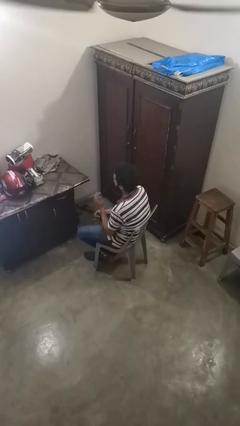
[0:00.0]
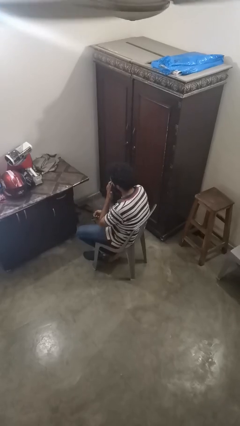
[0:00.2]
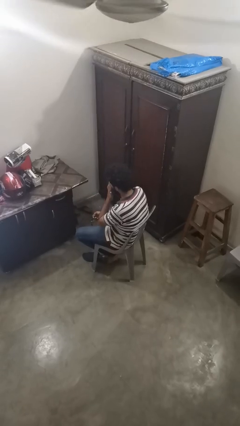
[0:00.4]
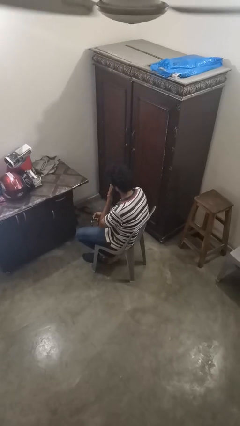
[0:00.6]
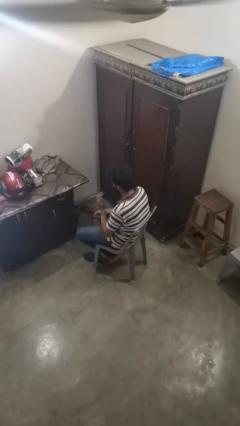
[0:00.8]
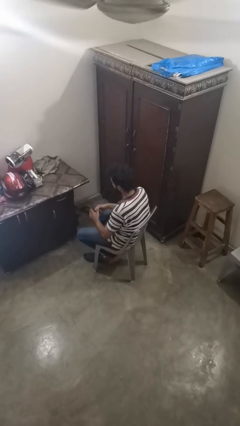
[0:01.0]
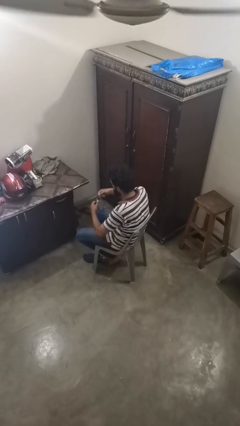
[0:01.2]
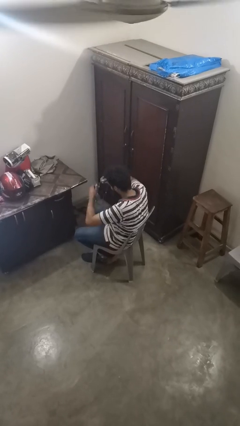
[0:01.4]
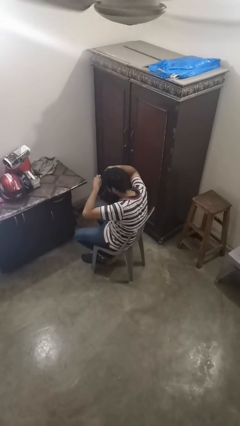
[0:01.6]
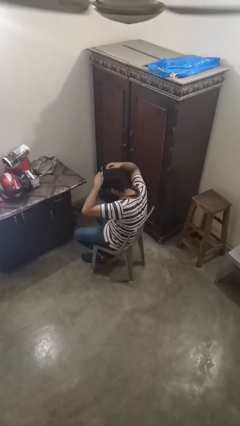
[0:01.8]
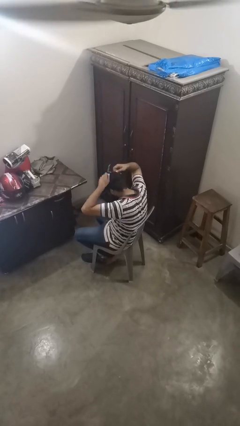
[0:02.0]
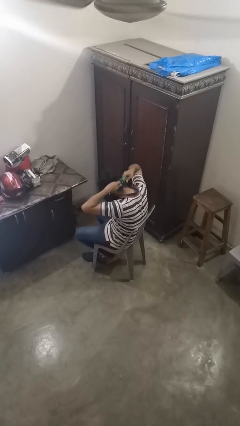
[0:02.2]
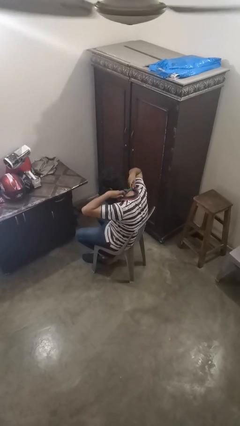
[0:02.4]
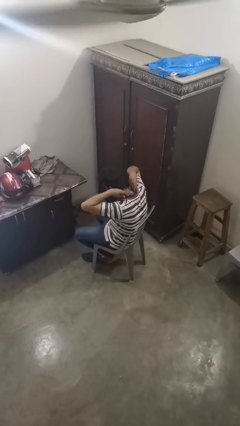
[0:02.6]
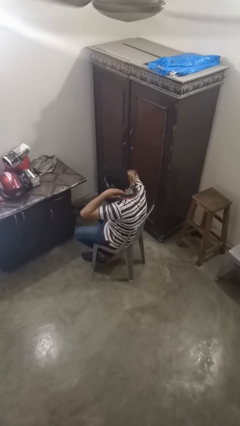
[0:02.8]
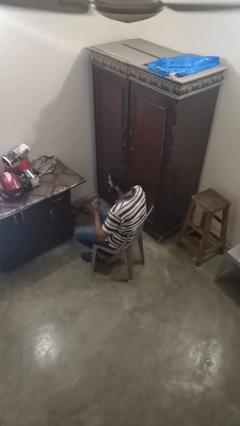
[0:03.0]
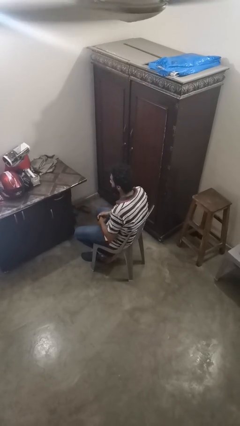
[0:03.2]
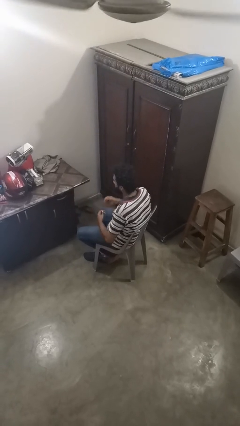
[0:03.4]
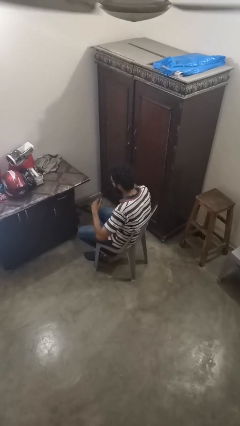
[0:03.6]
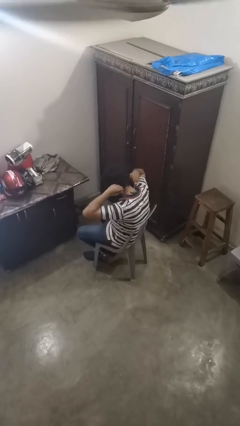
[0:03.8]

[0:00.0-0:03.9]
person puts on necklace

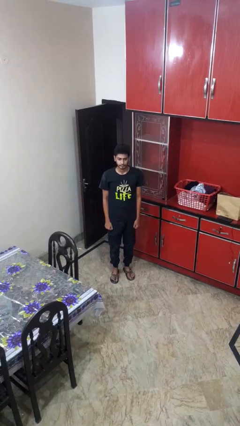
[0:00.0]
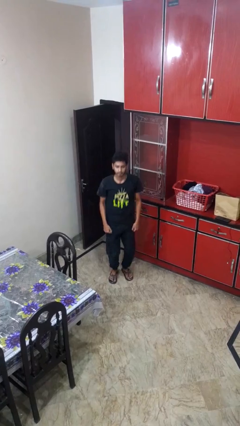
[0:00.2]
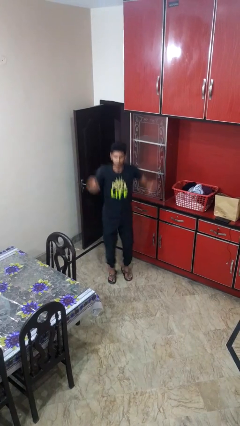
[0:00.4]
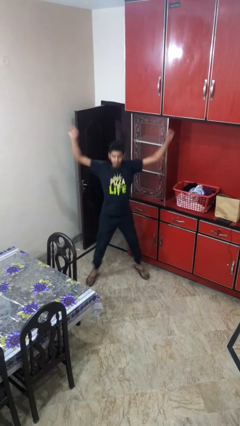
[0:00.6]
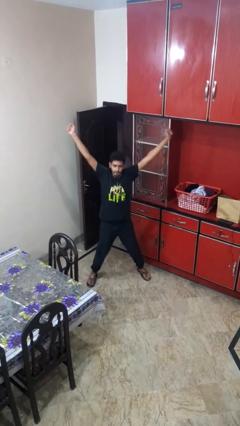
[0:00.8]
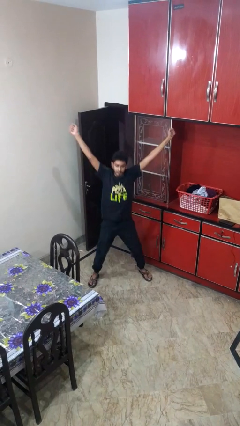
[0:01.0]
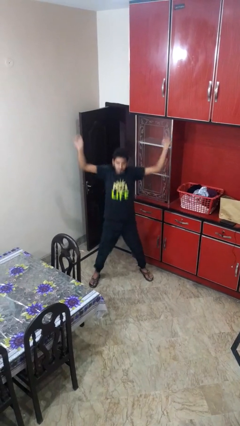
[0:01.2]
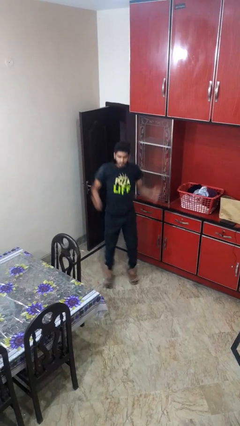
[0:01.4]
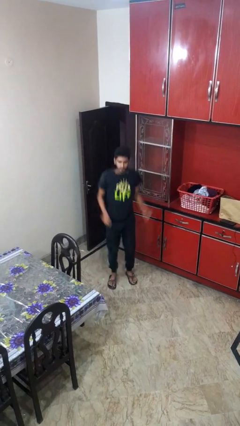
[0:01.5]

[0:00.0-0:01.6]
person exercises with jumping jacks

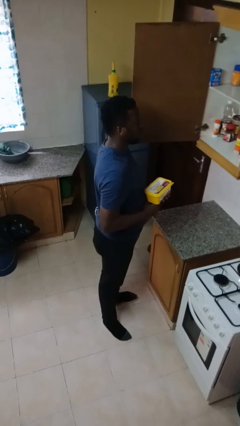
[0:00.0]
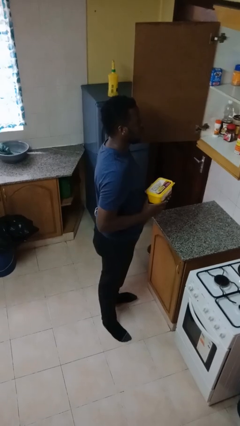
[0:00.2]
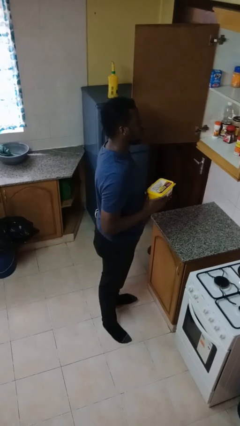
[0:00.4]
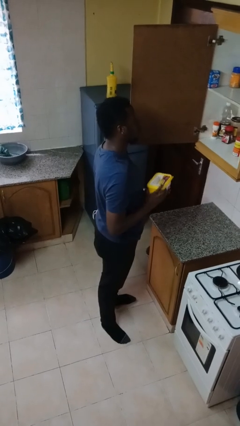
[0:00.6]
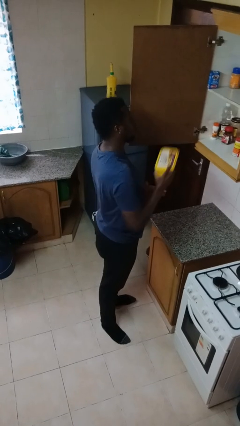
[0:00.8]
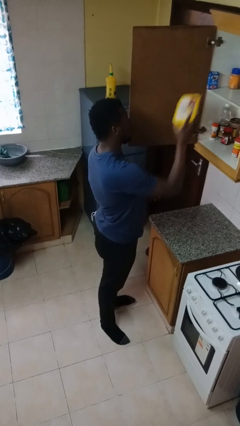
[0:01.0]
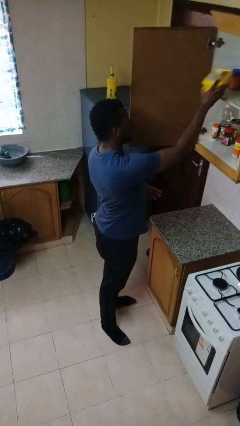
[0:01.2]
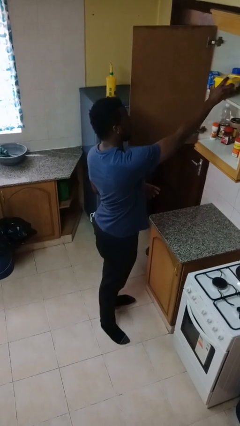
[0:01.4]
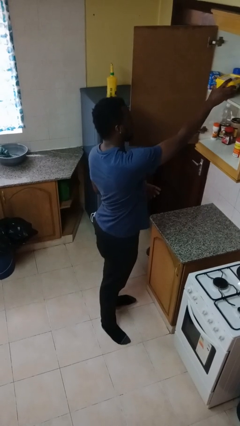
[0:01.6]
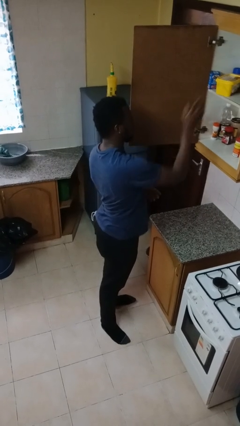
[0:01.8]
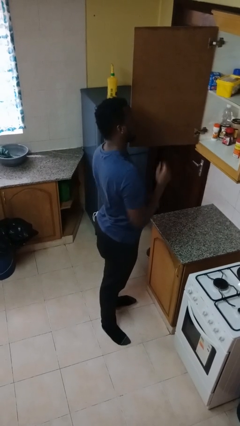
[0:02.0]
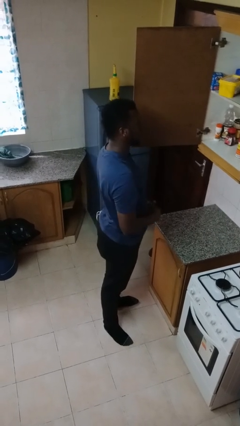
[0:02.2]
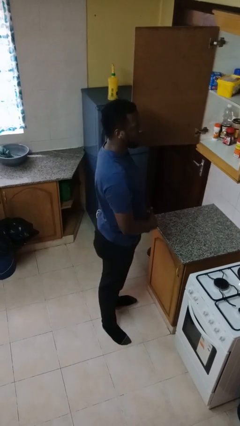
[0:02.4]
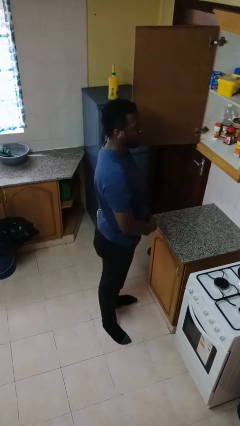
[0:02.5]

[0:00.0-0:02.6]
person puts down object on shelf

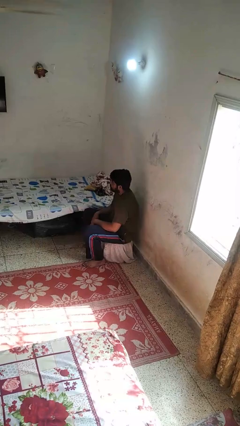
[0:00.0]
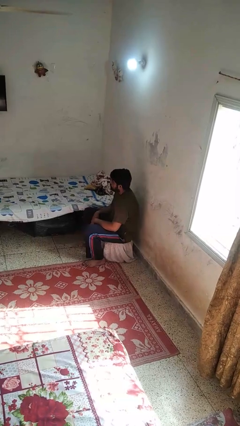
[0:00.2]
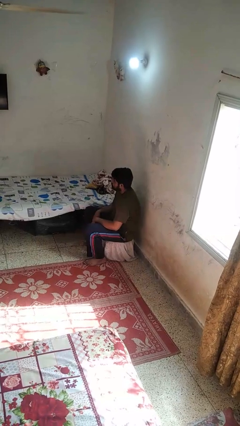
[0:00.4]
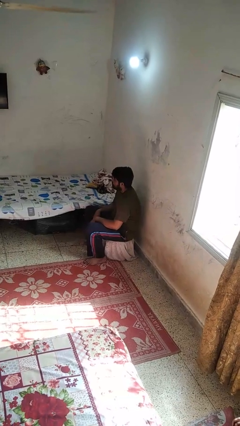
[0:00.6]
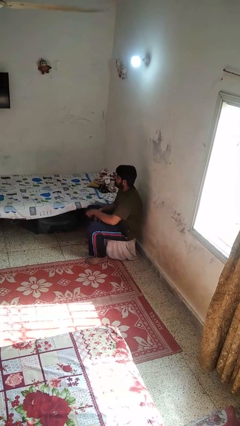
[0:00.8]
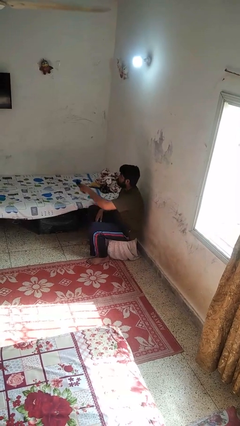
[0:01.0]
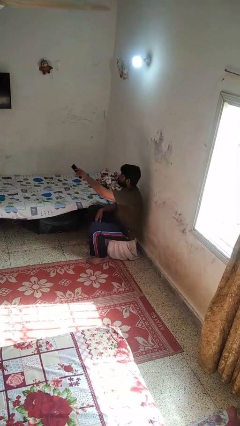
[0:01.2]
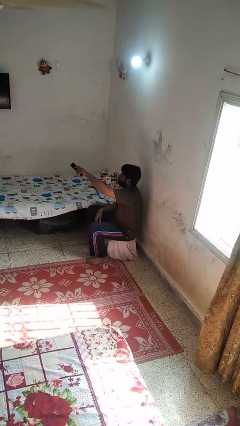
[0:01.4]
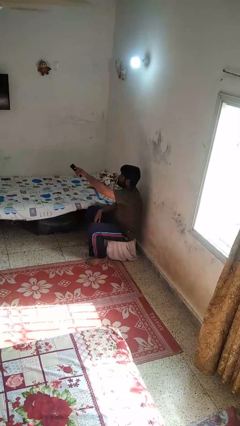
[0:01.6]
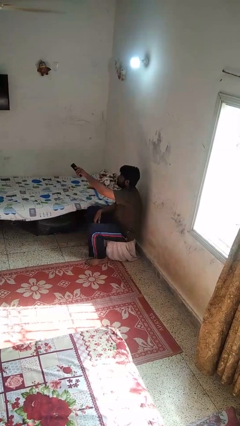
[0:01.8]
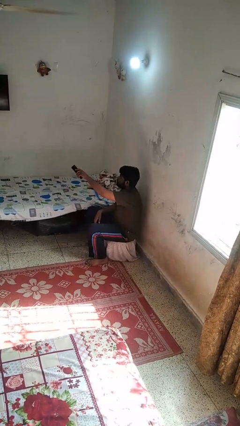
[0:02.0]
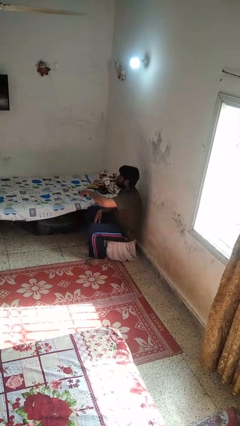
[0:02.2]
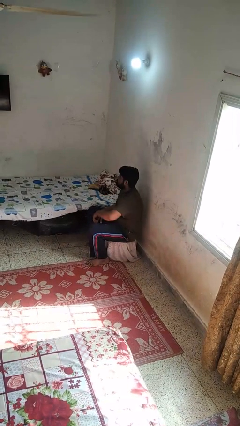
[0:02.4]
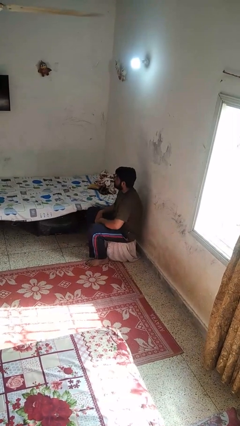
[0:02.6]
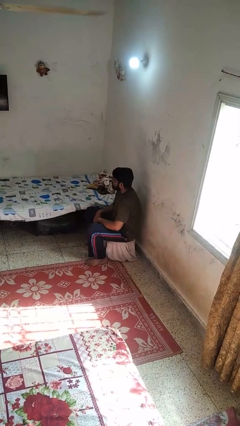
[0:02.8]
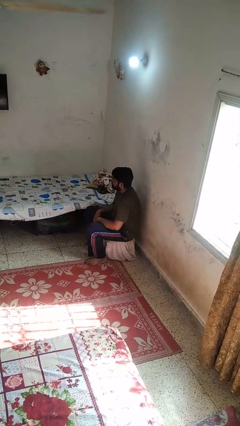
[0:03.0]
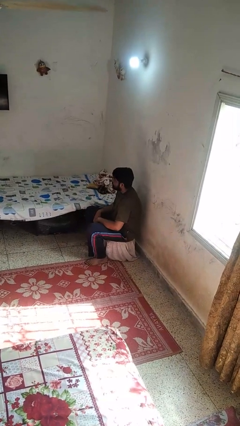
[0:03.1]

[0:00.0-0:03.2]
person uses television remote

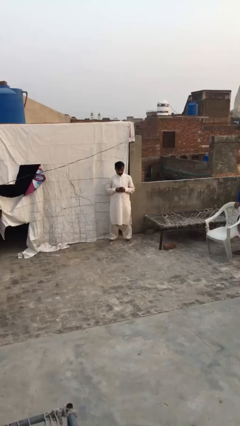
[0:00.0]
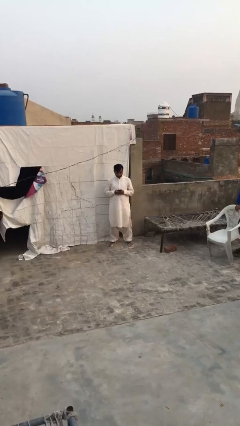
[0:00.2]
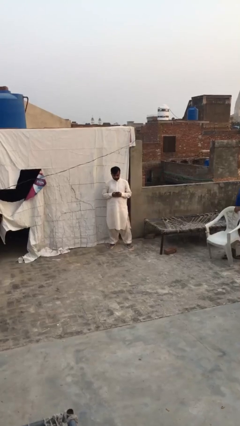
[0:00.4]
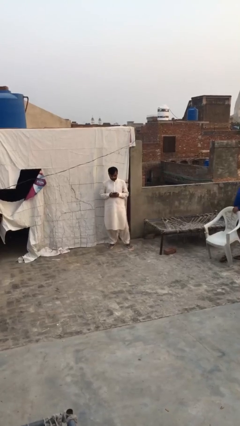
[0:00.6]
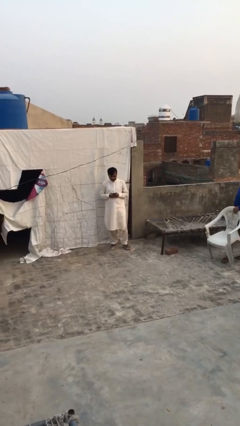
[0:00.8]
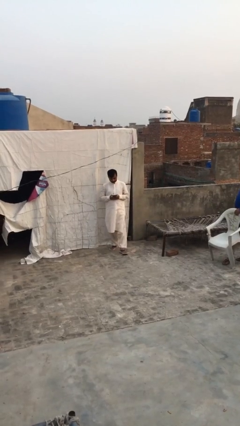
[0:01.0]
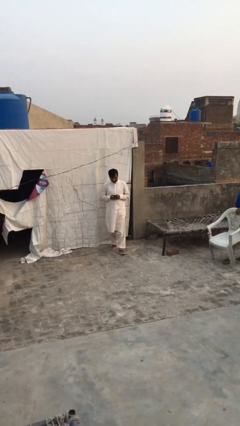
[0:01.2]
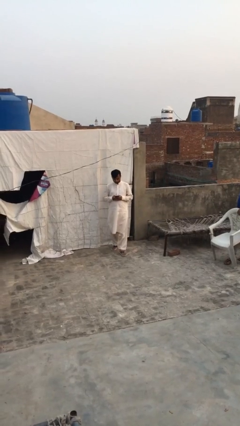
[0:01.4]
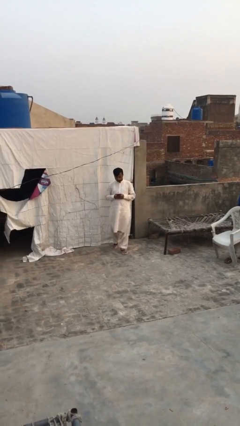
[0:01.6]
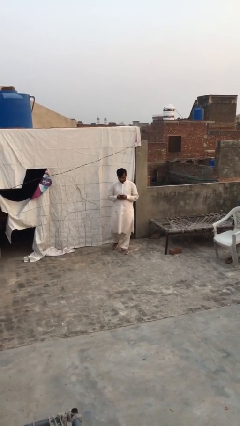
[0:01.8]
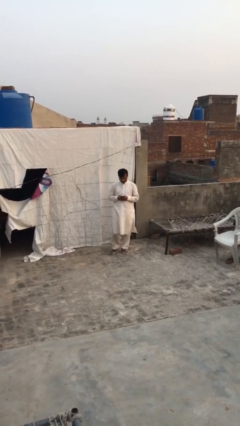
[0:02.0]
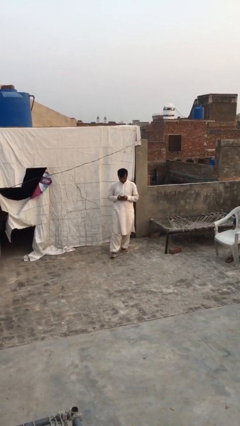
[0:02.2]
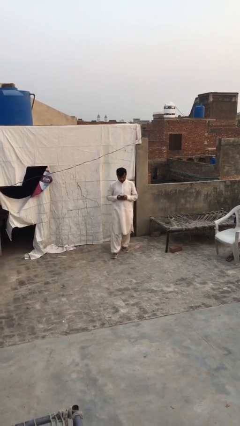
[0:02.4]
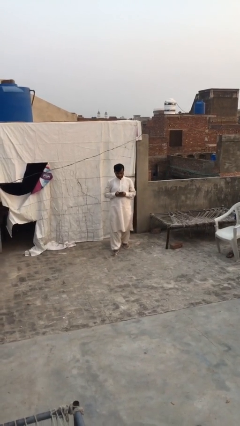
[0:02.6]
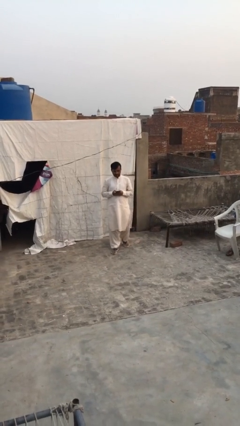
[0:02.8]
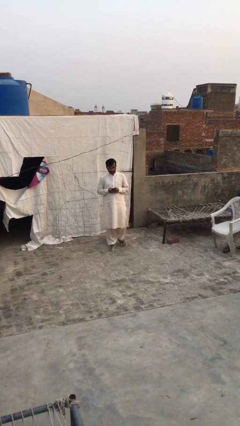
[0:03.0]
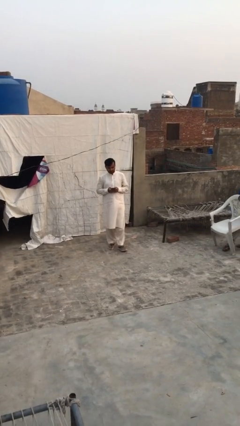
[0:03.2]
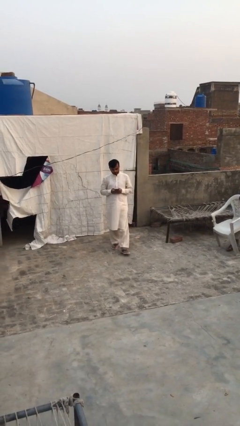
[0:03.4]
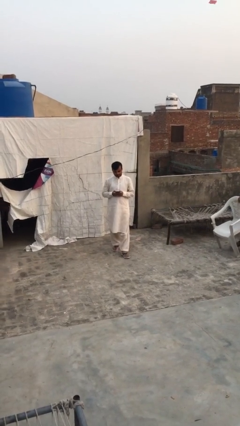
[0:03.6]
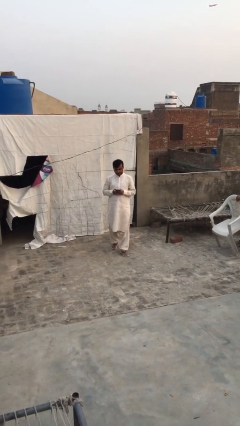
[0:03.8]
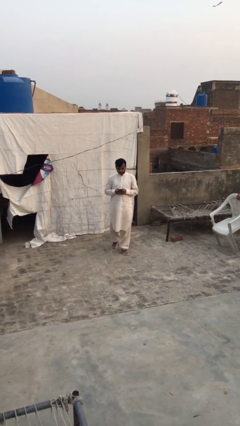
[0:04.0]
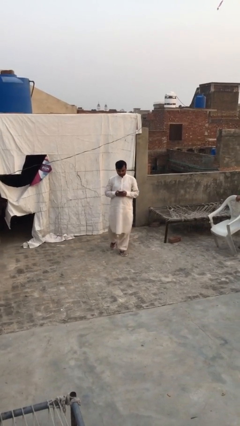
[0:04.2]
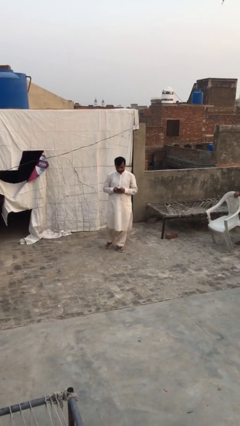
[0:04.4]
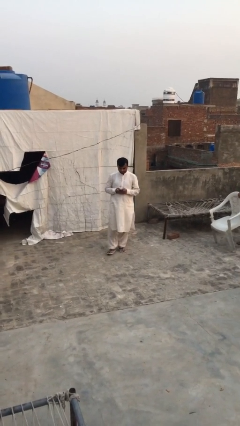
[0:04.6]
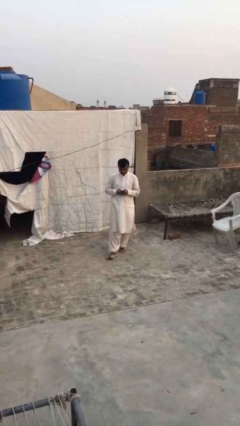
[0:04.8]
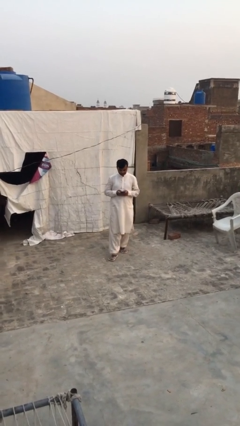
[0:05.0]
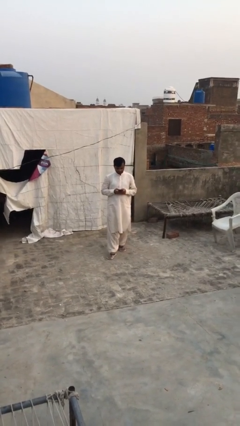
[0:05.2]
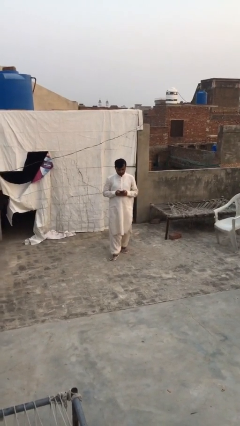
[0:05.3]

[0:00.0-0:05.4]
person texts on phone

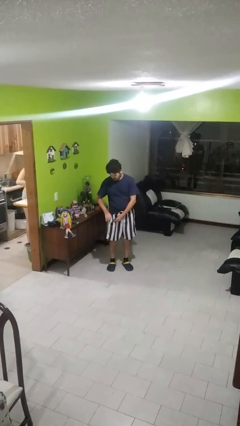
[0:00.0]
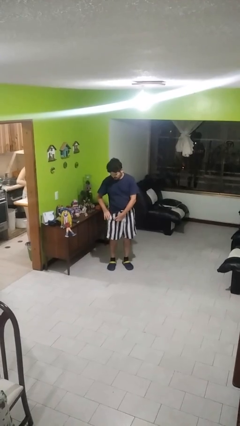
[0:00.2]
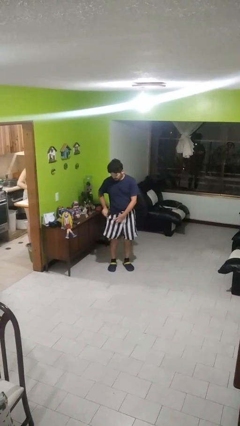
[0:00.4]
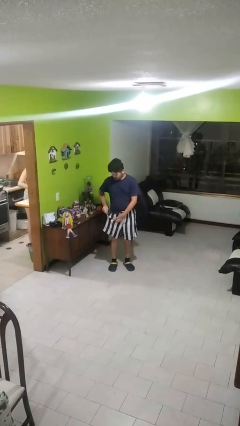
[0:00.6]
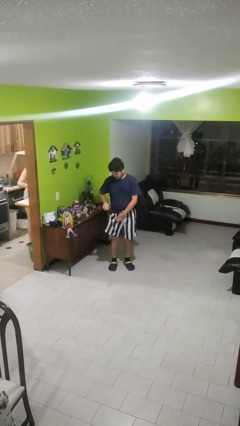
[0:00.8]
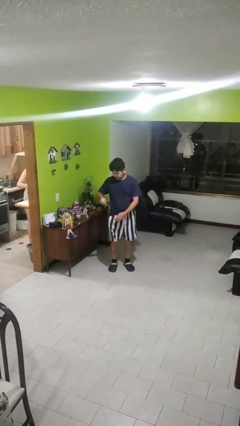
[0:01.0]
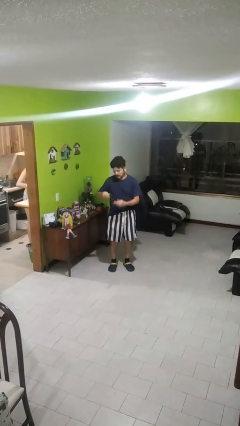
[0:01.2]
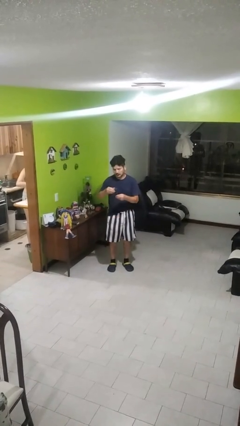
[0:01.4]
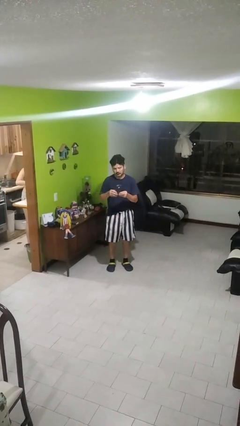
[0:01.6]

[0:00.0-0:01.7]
person takes phone from pocket
